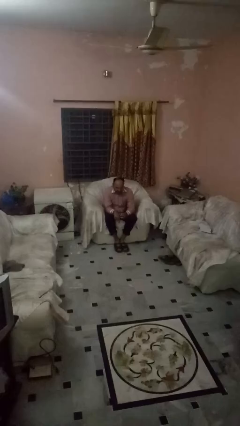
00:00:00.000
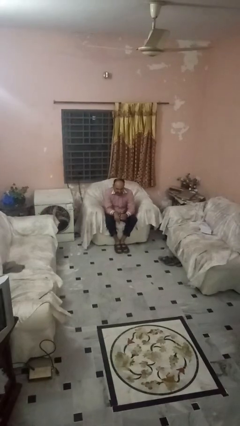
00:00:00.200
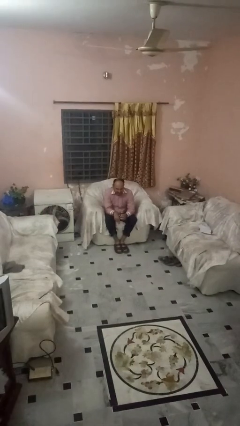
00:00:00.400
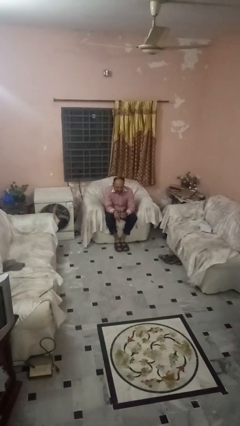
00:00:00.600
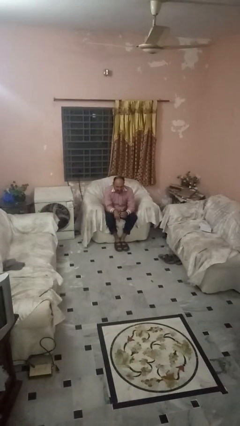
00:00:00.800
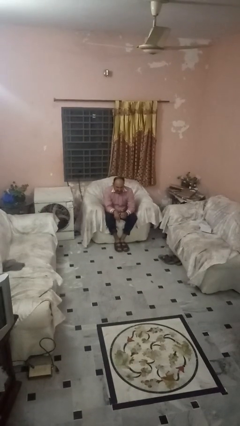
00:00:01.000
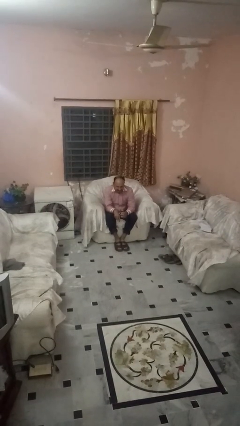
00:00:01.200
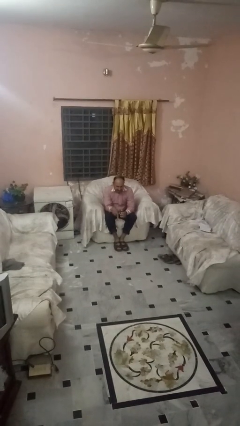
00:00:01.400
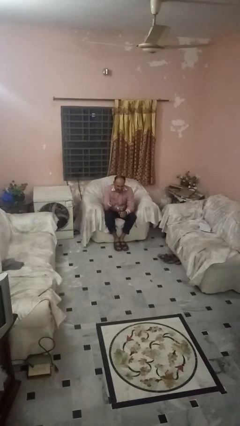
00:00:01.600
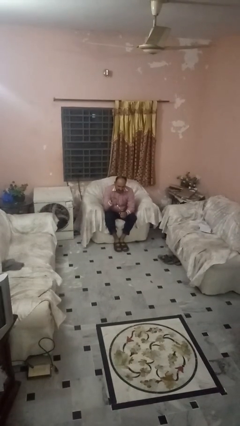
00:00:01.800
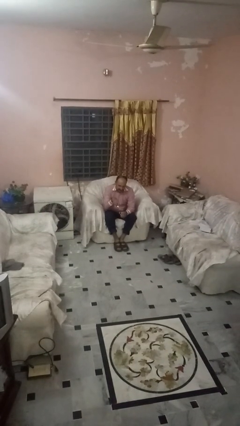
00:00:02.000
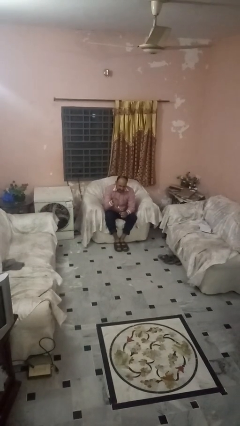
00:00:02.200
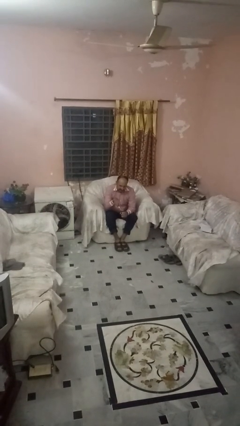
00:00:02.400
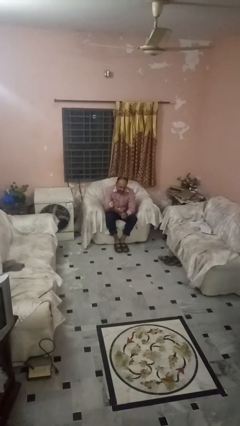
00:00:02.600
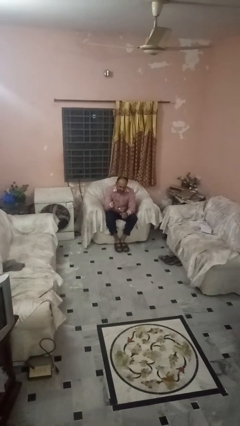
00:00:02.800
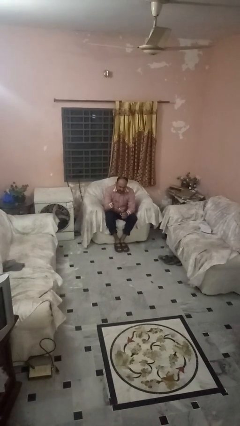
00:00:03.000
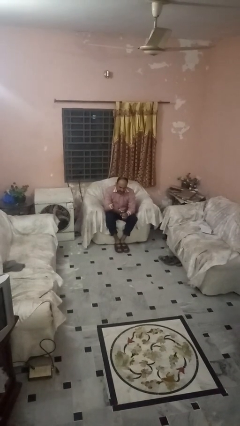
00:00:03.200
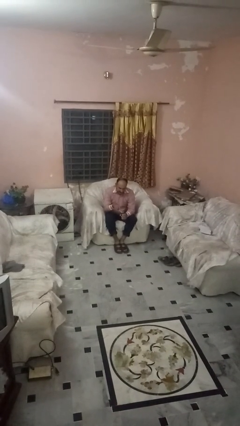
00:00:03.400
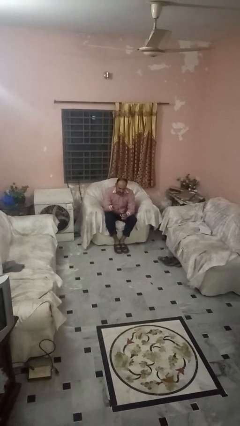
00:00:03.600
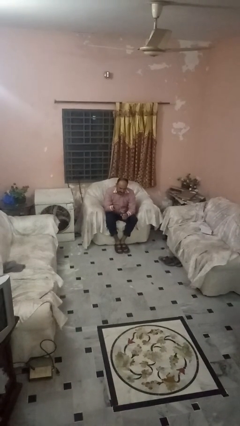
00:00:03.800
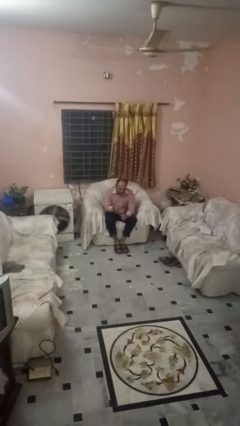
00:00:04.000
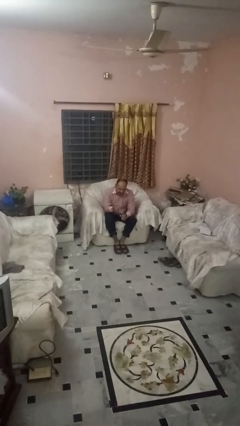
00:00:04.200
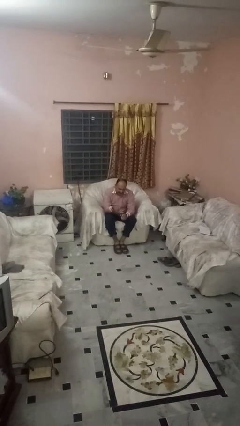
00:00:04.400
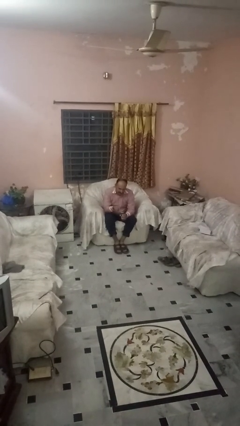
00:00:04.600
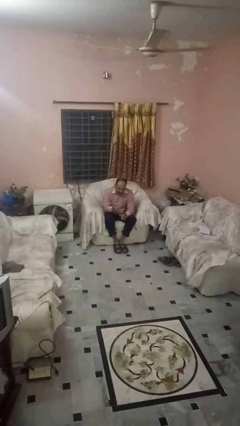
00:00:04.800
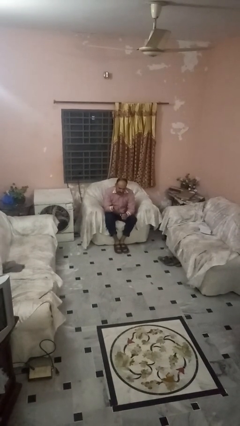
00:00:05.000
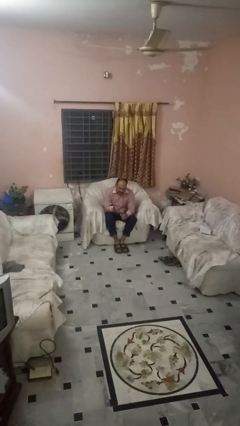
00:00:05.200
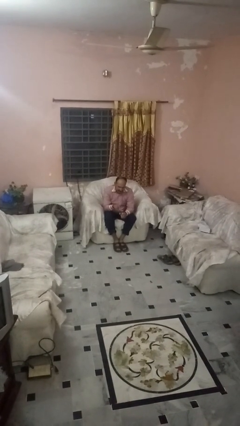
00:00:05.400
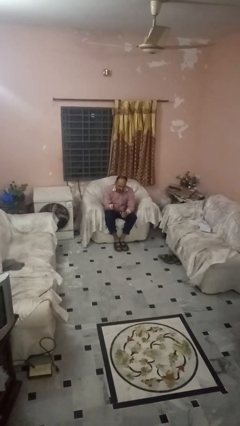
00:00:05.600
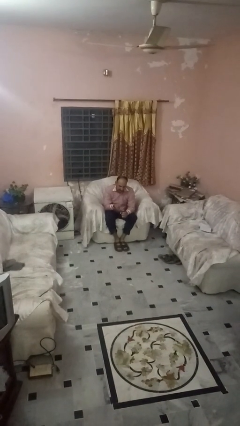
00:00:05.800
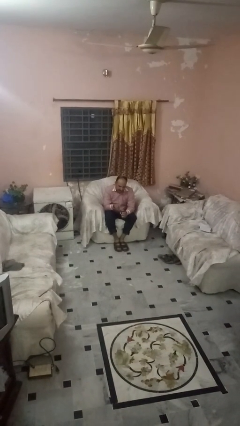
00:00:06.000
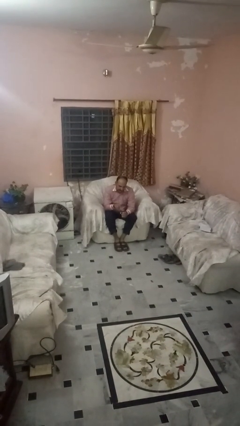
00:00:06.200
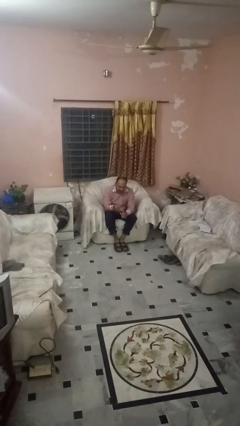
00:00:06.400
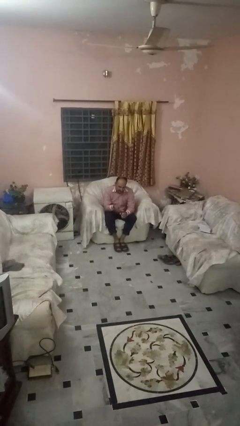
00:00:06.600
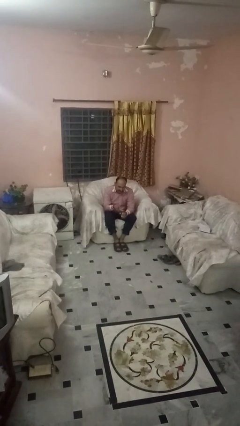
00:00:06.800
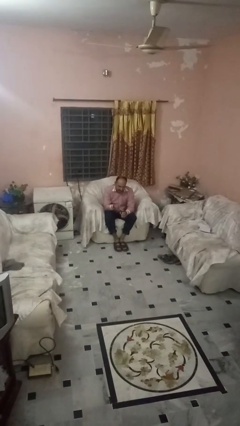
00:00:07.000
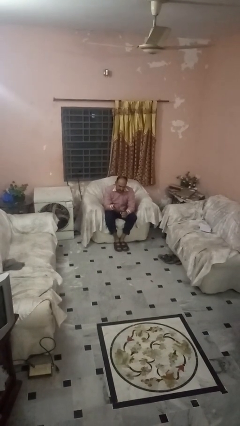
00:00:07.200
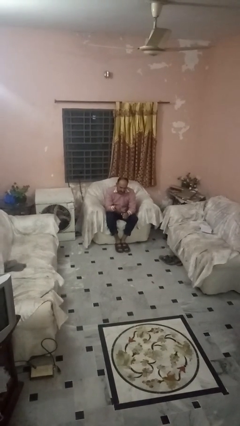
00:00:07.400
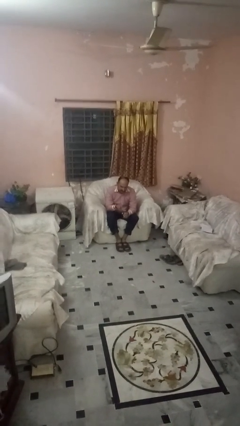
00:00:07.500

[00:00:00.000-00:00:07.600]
person opens can with can opener

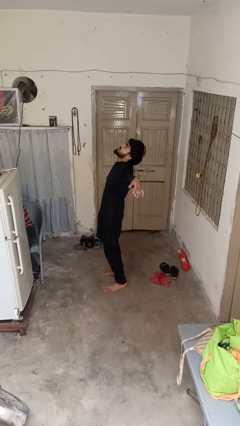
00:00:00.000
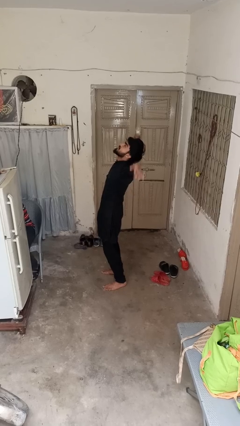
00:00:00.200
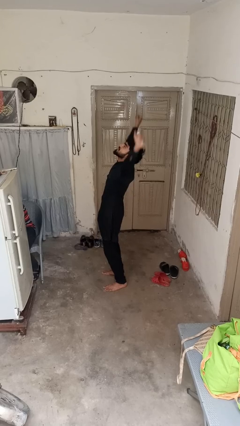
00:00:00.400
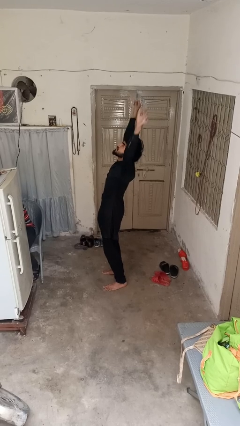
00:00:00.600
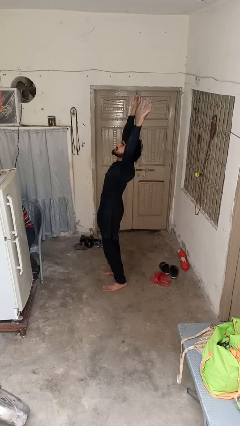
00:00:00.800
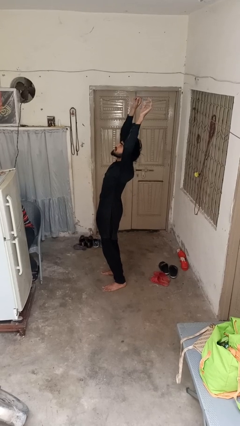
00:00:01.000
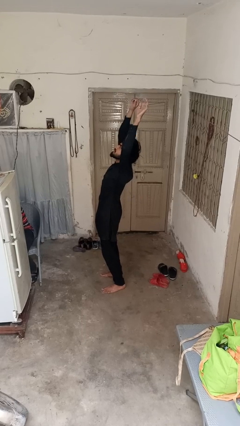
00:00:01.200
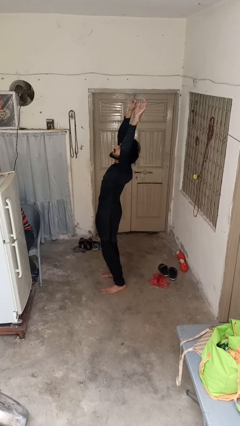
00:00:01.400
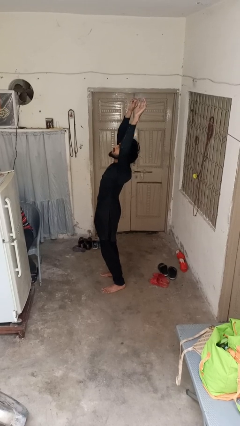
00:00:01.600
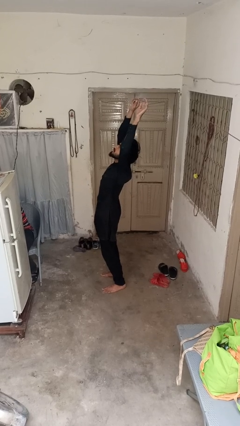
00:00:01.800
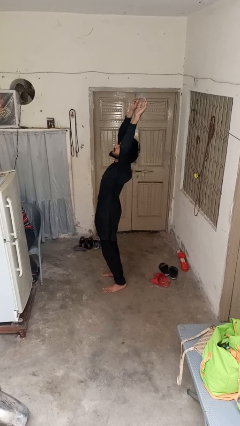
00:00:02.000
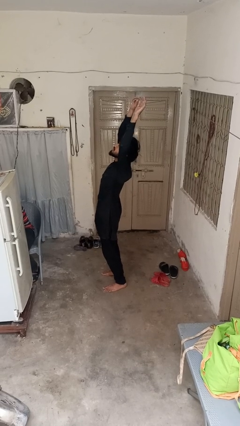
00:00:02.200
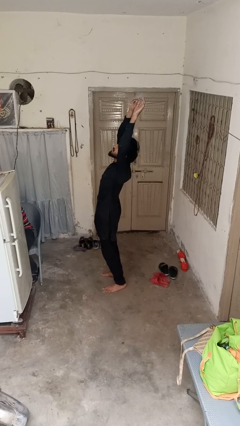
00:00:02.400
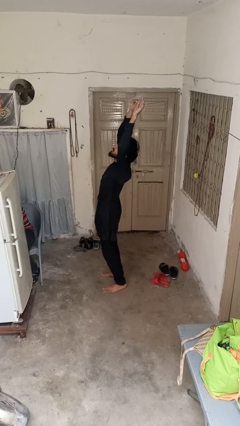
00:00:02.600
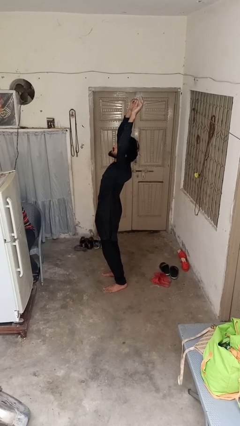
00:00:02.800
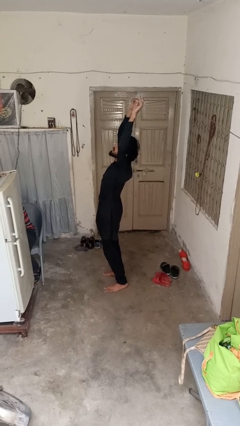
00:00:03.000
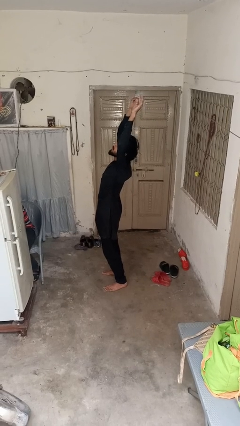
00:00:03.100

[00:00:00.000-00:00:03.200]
person stretches arms over head

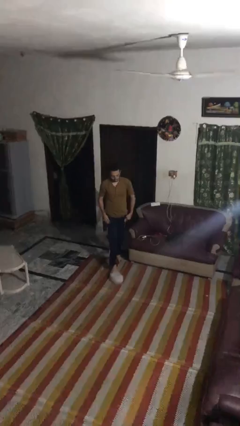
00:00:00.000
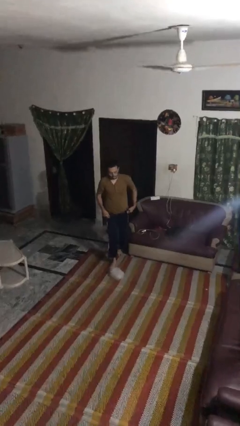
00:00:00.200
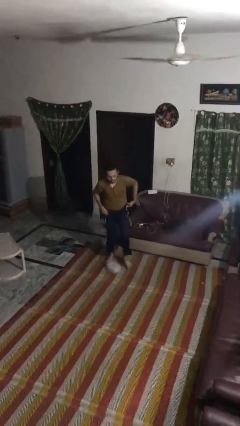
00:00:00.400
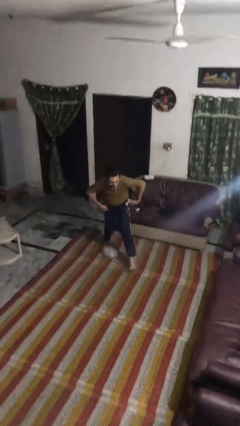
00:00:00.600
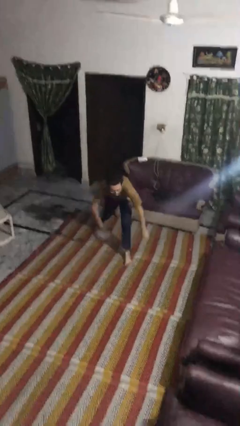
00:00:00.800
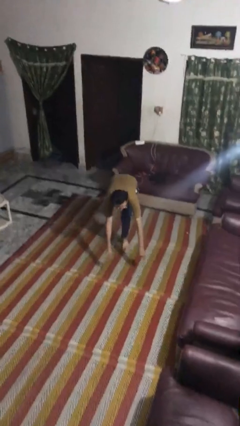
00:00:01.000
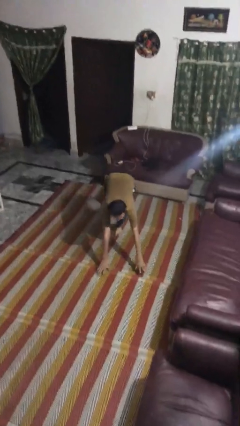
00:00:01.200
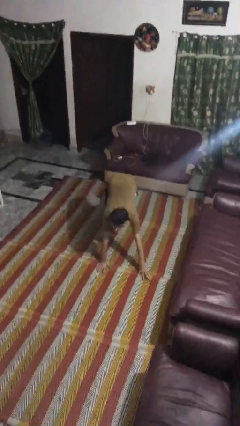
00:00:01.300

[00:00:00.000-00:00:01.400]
person trips on object on floor

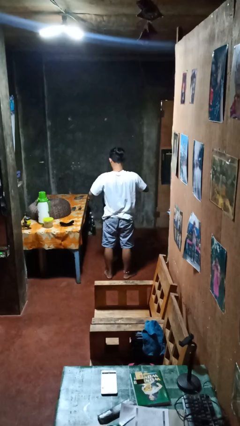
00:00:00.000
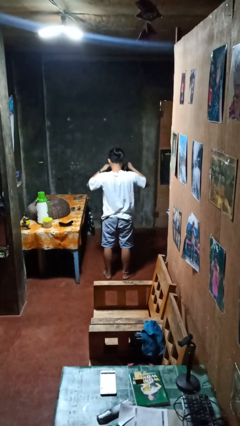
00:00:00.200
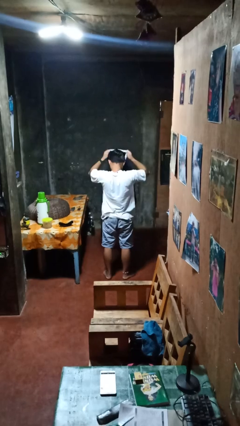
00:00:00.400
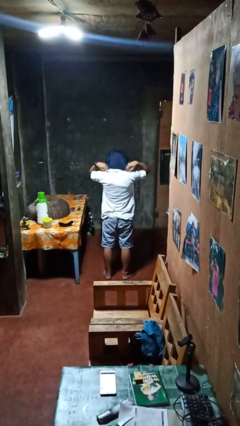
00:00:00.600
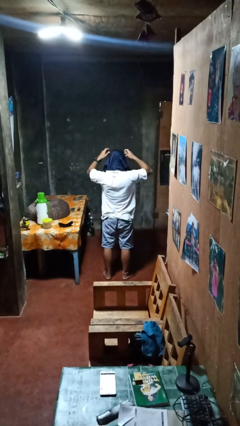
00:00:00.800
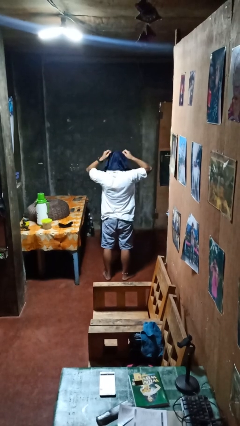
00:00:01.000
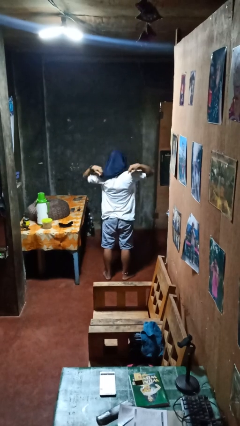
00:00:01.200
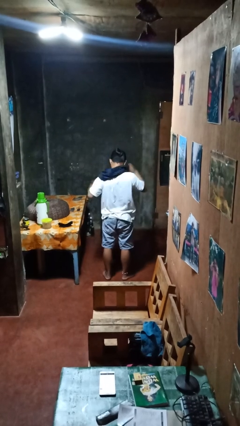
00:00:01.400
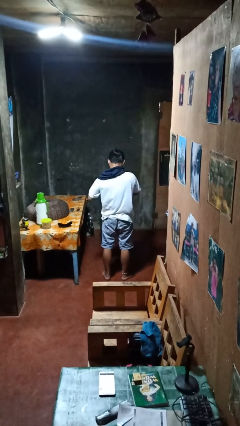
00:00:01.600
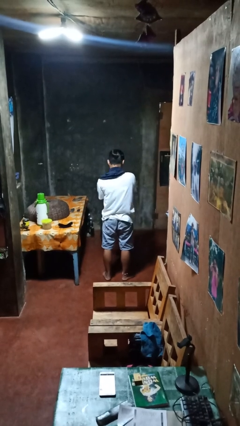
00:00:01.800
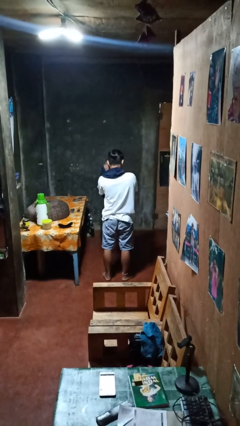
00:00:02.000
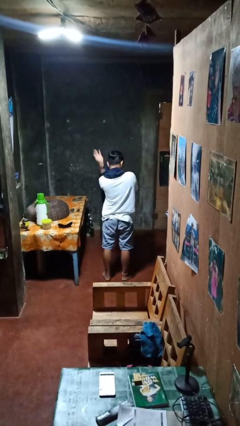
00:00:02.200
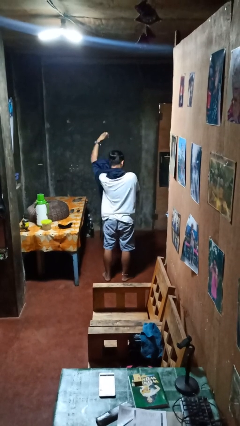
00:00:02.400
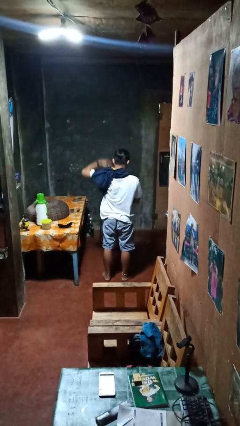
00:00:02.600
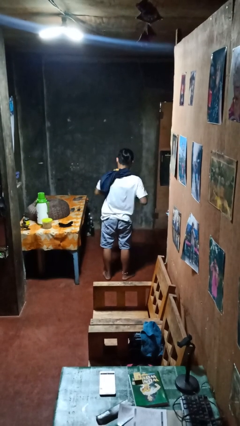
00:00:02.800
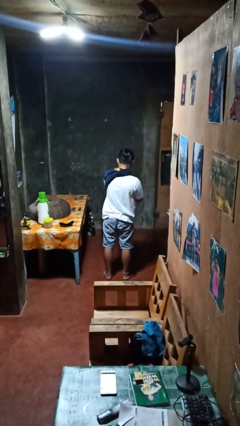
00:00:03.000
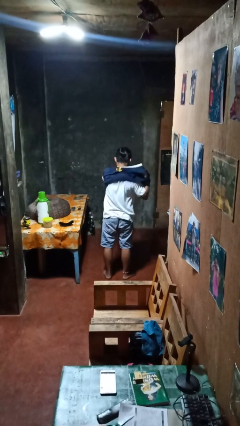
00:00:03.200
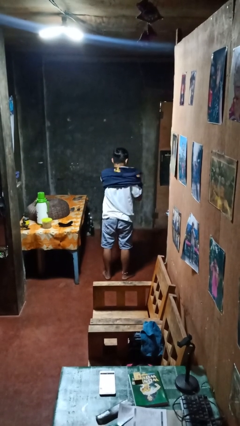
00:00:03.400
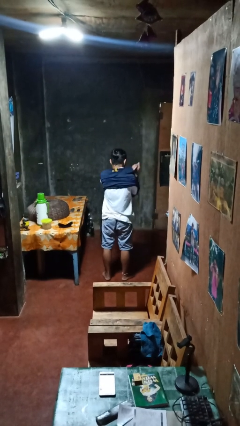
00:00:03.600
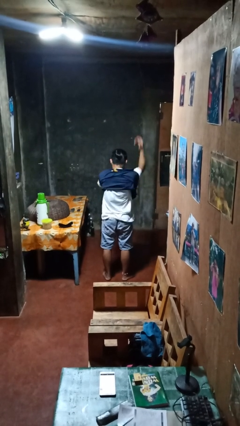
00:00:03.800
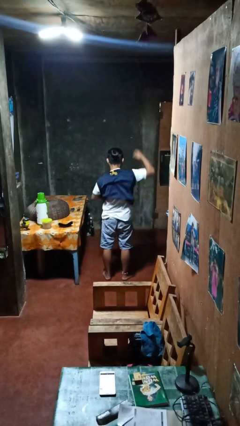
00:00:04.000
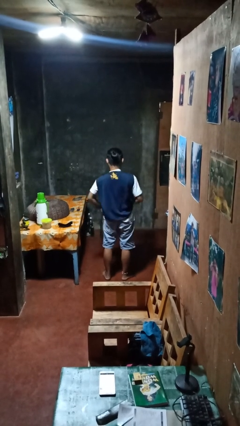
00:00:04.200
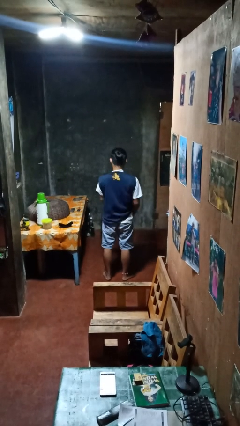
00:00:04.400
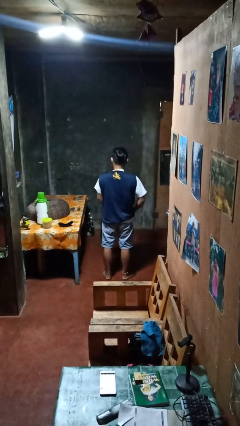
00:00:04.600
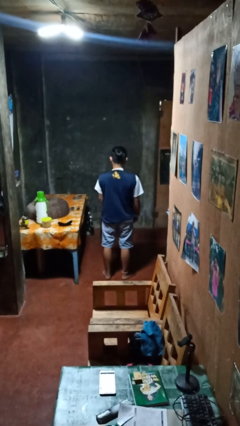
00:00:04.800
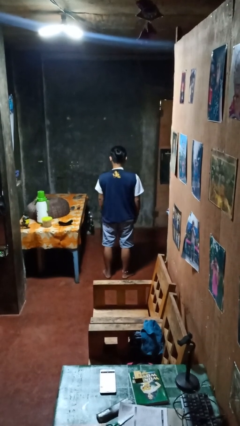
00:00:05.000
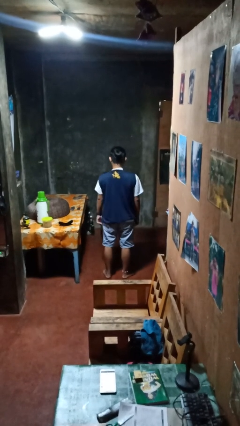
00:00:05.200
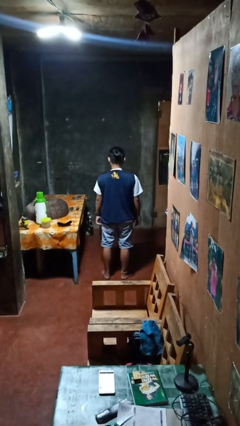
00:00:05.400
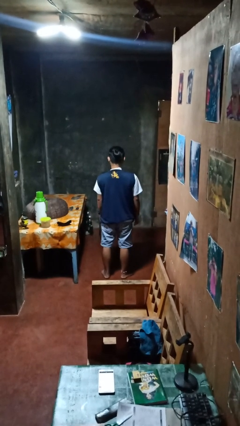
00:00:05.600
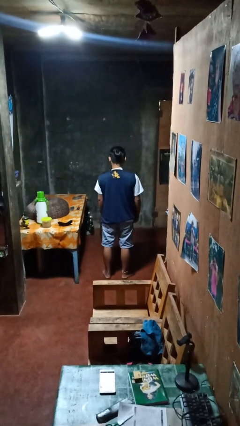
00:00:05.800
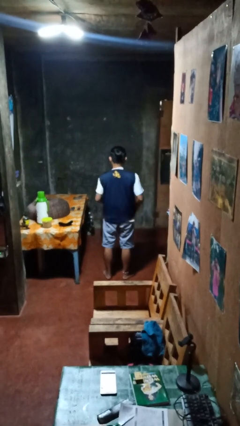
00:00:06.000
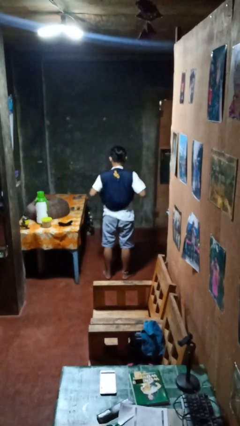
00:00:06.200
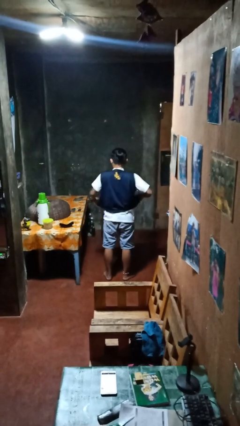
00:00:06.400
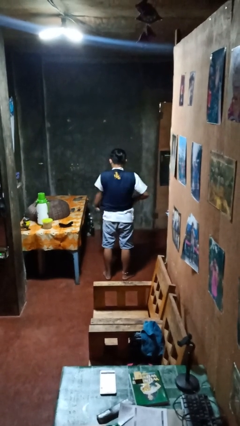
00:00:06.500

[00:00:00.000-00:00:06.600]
person puts on shirt
